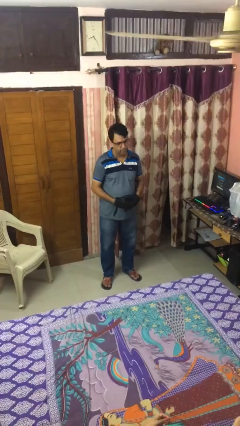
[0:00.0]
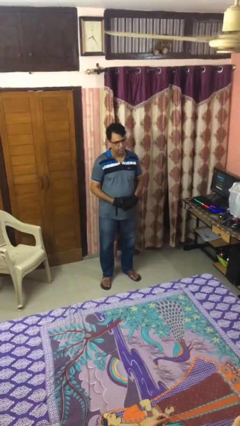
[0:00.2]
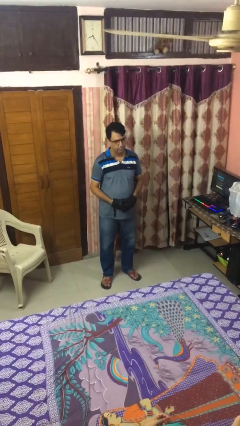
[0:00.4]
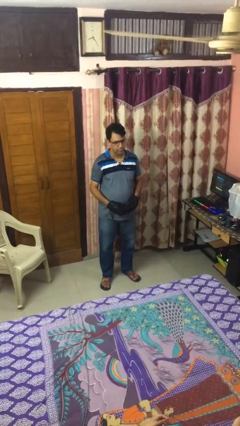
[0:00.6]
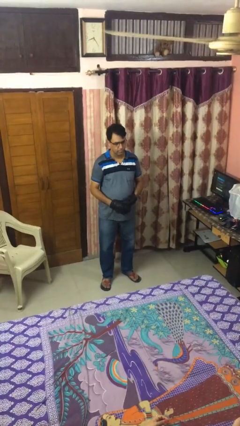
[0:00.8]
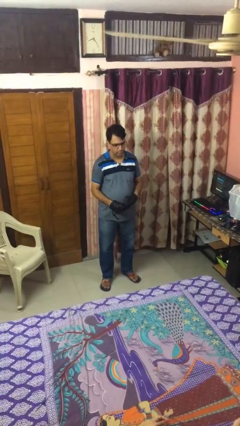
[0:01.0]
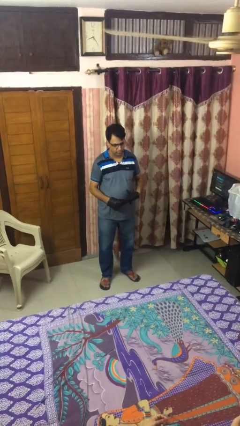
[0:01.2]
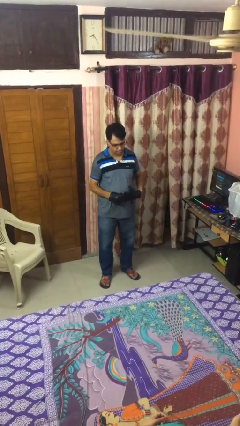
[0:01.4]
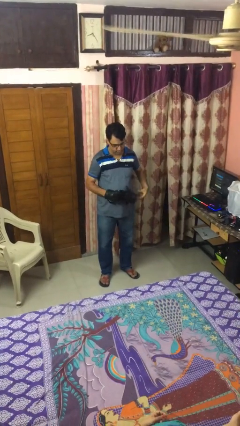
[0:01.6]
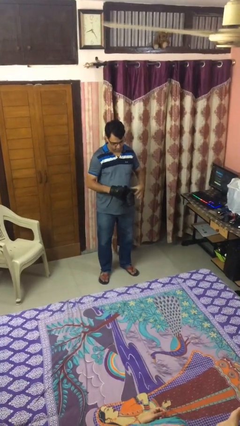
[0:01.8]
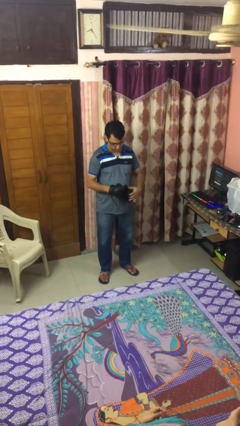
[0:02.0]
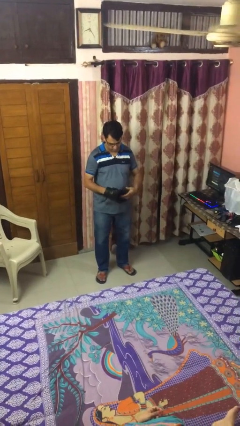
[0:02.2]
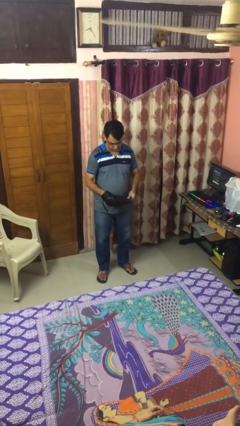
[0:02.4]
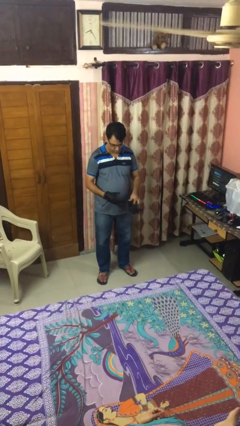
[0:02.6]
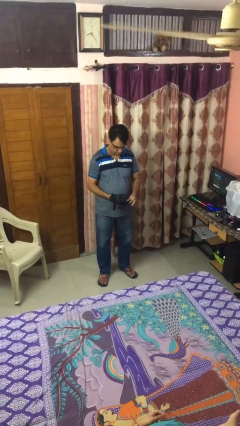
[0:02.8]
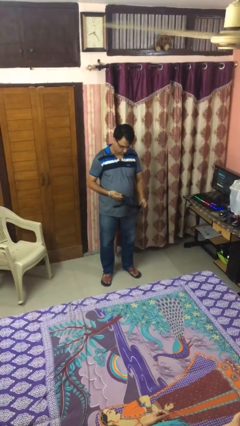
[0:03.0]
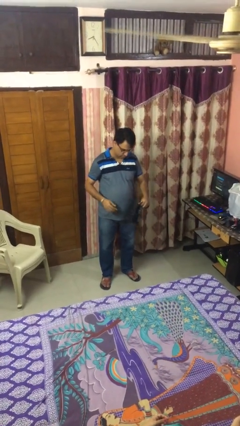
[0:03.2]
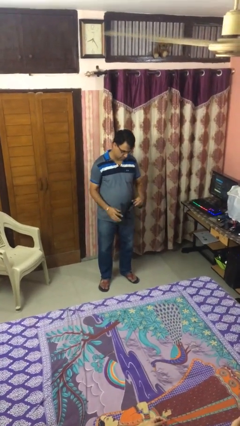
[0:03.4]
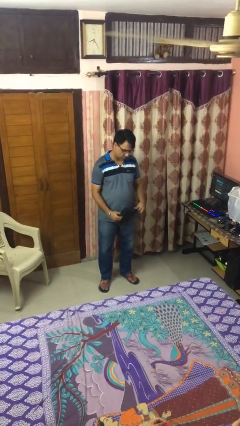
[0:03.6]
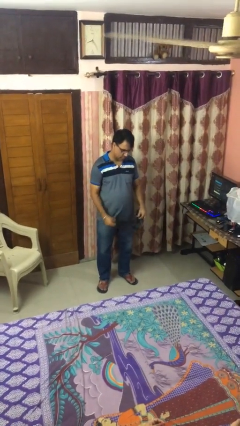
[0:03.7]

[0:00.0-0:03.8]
person takes off gloves

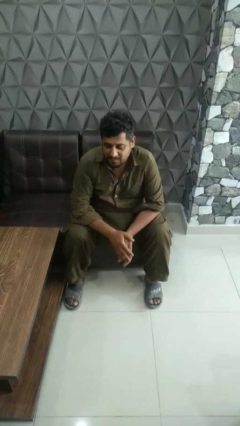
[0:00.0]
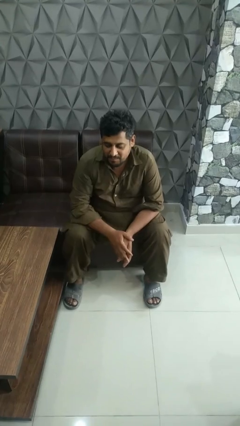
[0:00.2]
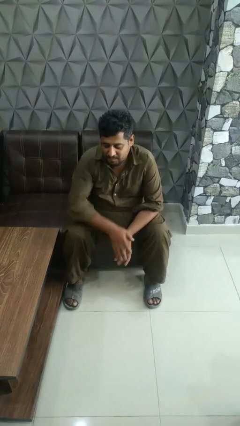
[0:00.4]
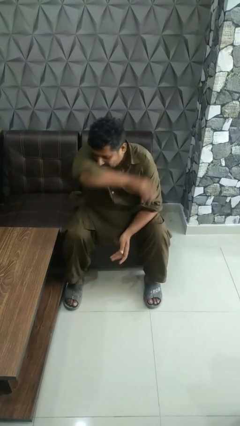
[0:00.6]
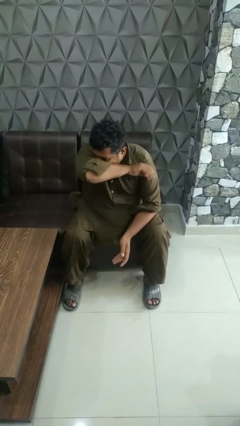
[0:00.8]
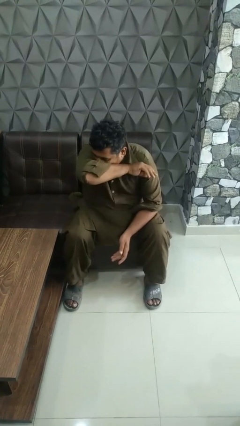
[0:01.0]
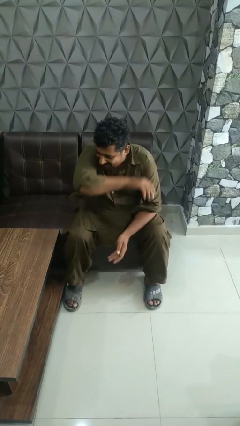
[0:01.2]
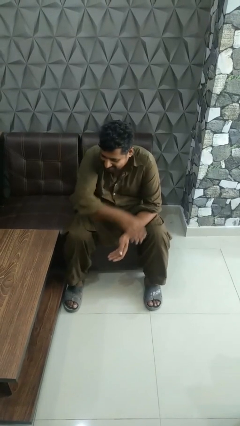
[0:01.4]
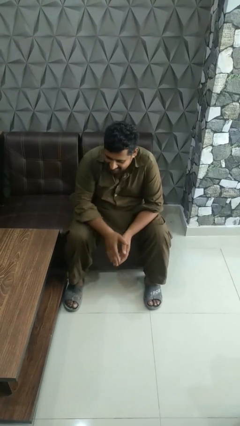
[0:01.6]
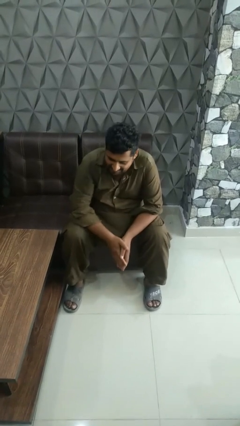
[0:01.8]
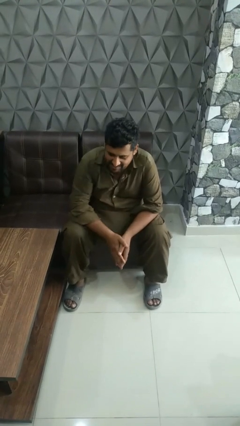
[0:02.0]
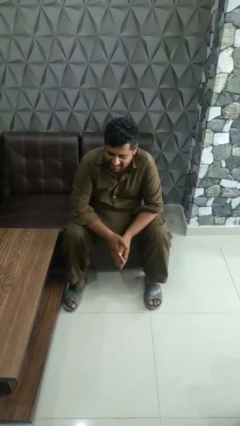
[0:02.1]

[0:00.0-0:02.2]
person sneezes into arm

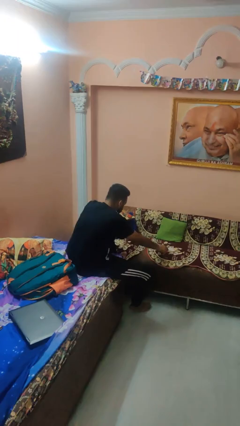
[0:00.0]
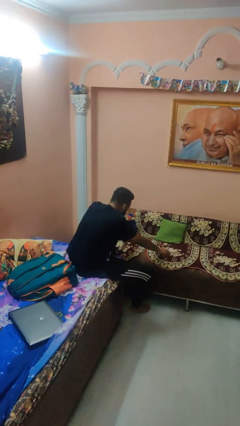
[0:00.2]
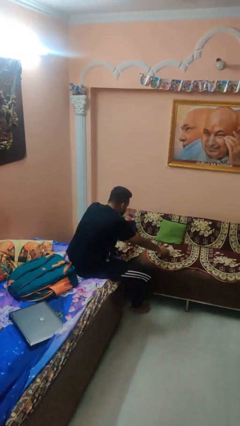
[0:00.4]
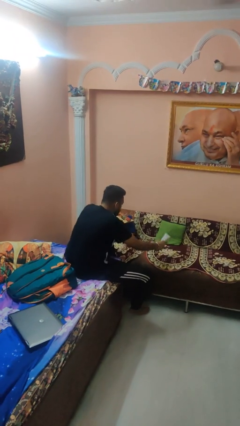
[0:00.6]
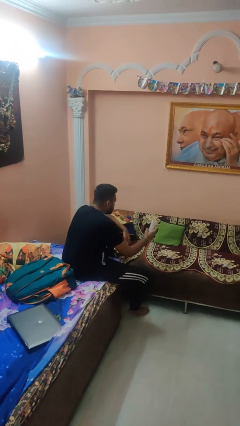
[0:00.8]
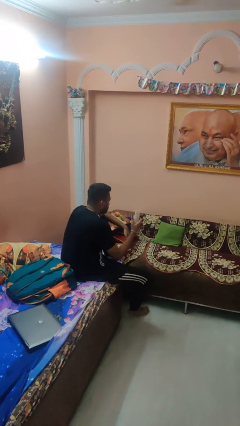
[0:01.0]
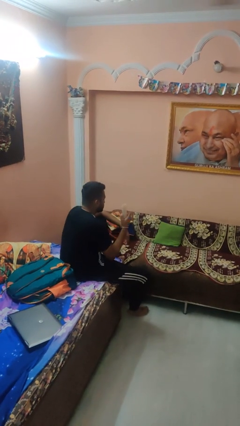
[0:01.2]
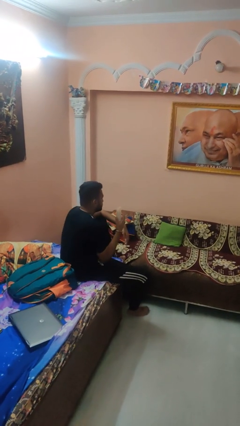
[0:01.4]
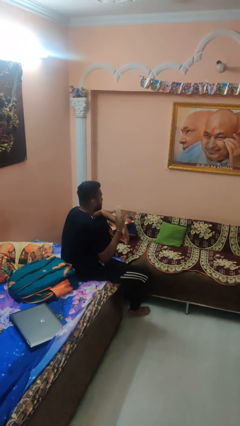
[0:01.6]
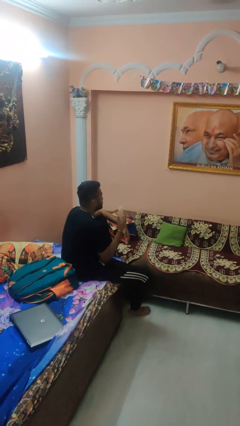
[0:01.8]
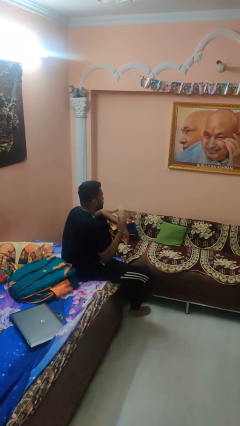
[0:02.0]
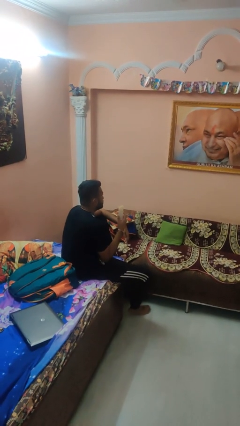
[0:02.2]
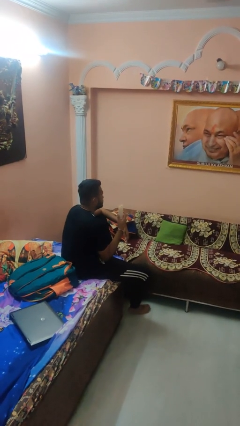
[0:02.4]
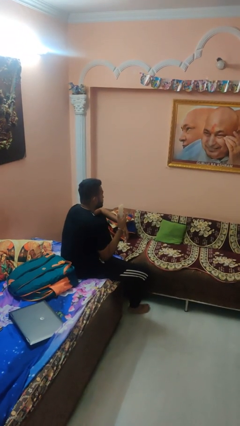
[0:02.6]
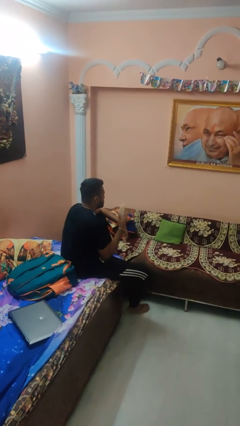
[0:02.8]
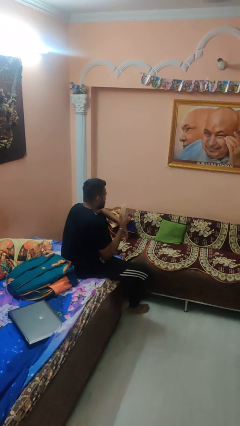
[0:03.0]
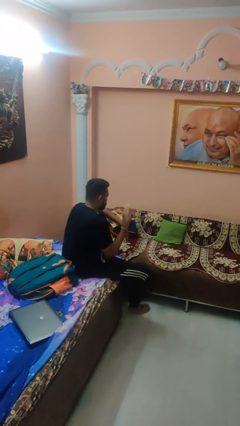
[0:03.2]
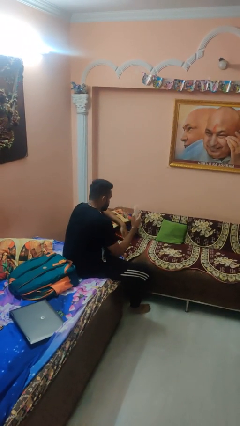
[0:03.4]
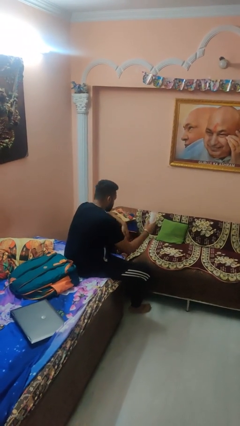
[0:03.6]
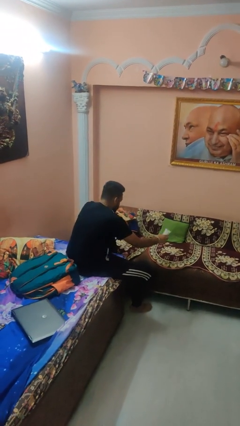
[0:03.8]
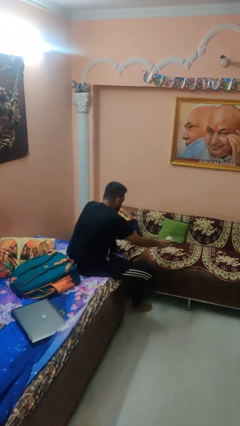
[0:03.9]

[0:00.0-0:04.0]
person picks up object from couch

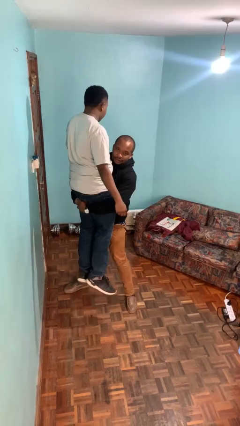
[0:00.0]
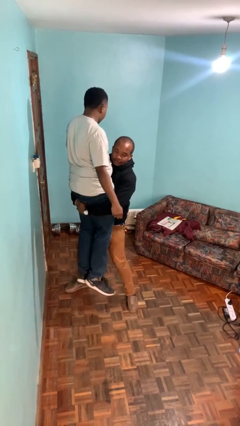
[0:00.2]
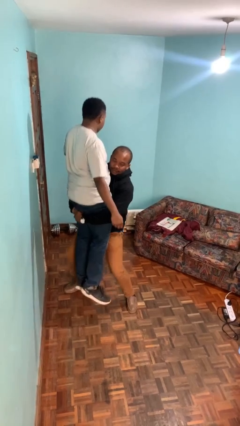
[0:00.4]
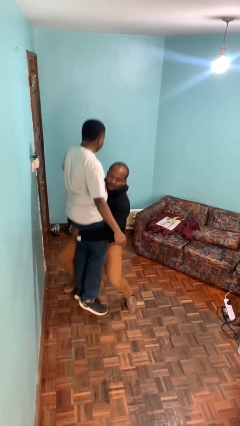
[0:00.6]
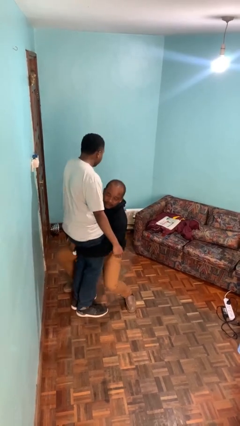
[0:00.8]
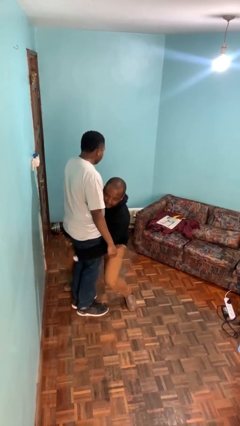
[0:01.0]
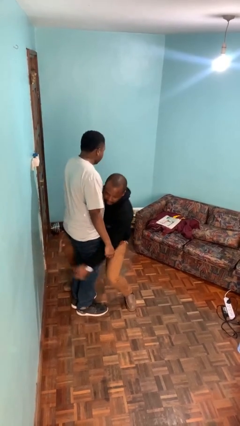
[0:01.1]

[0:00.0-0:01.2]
person puts down person

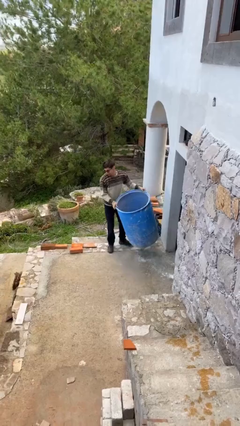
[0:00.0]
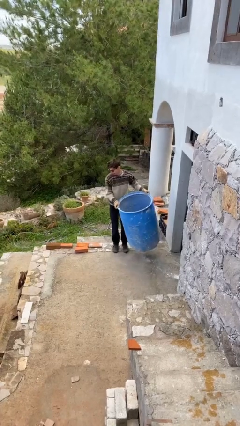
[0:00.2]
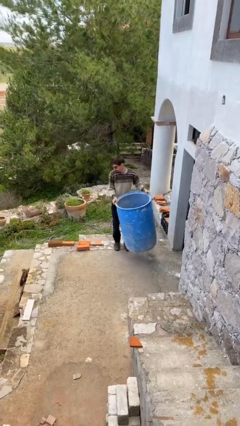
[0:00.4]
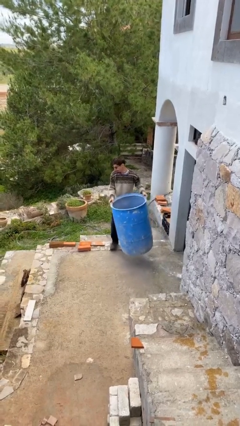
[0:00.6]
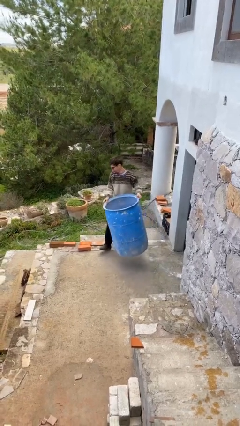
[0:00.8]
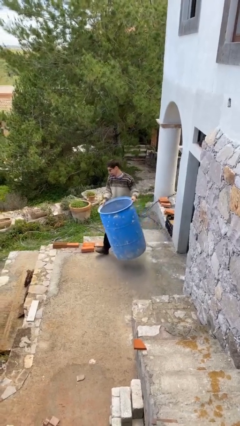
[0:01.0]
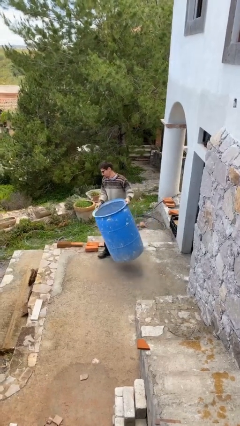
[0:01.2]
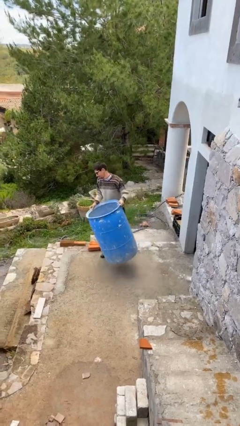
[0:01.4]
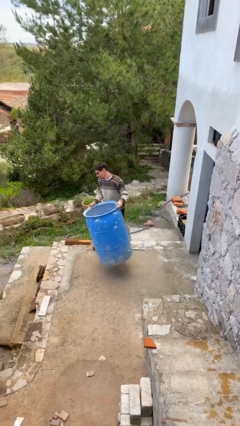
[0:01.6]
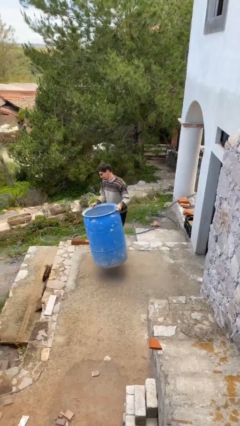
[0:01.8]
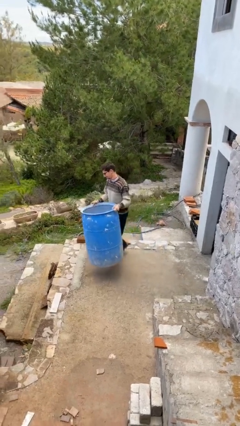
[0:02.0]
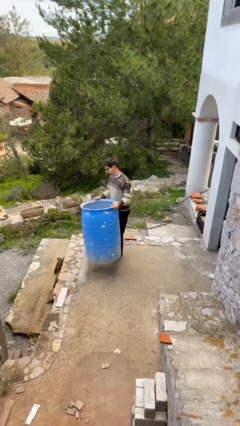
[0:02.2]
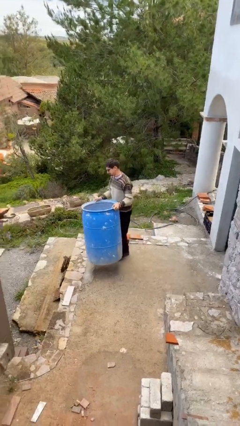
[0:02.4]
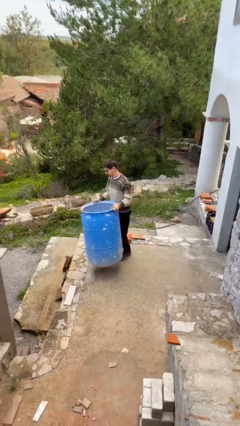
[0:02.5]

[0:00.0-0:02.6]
person carries heavy object

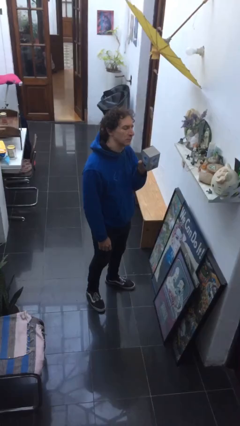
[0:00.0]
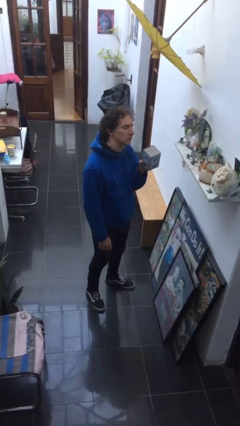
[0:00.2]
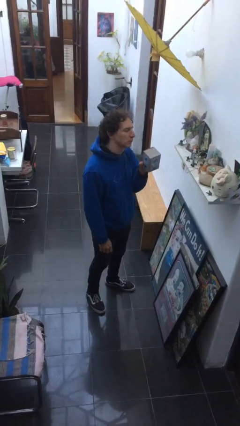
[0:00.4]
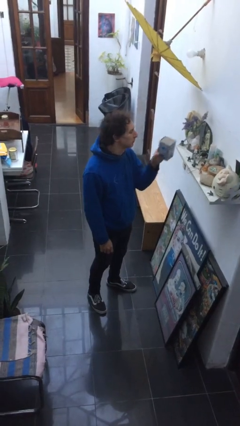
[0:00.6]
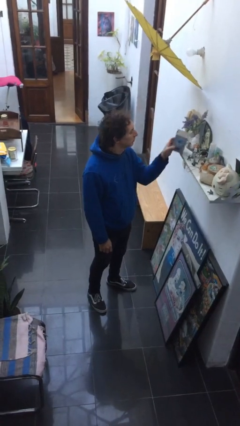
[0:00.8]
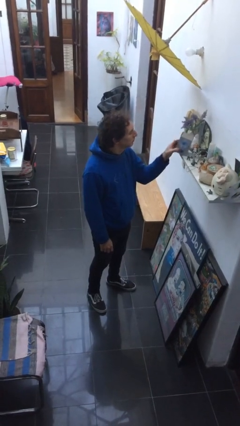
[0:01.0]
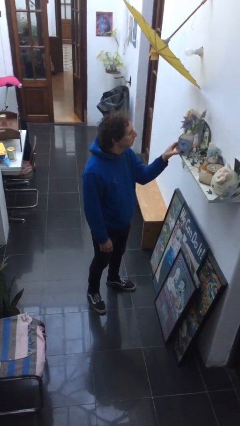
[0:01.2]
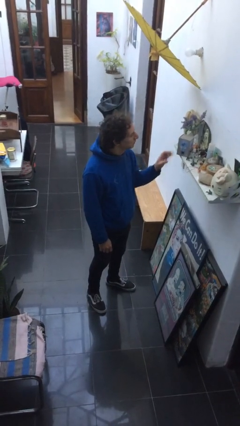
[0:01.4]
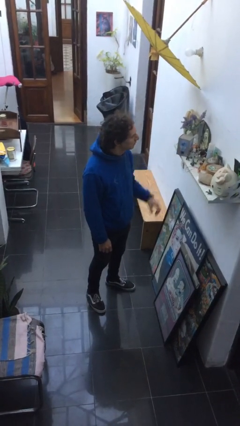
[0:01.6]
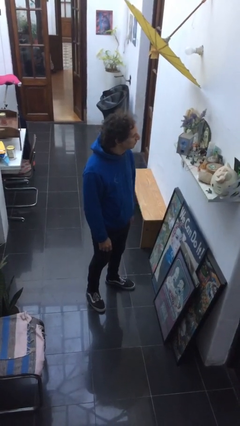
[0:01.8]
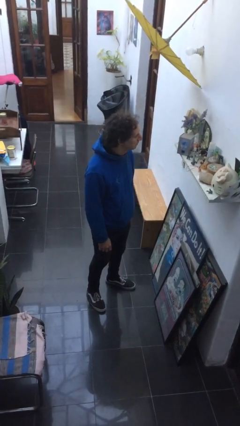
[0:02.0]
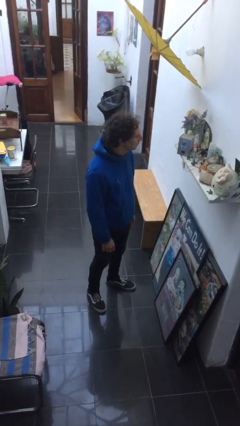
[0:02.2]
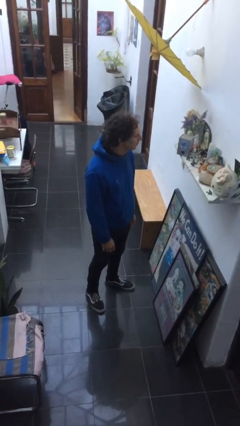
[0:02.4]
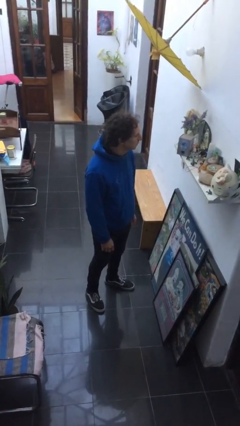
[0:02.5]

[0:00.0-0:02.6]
person puts down object on countertop

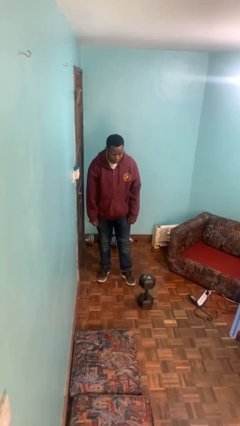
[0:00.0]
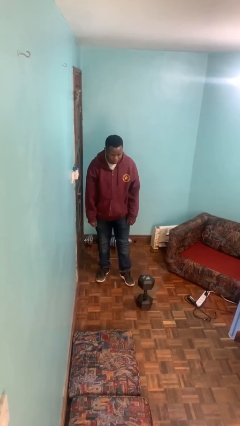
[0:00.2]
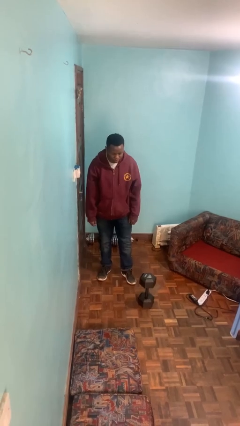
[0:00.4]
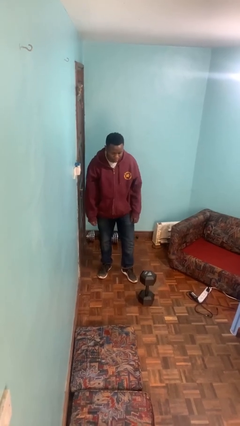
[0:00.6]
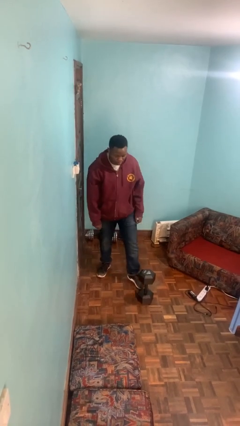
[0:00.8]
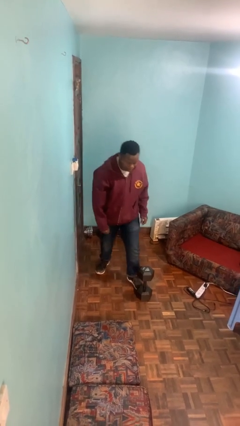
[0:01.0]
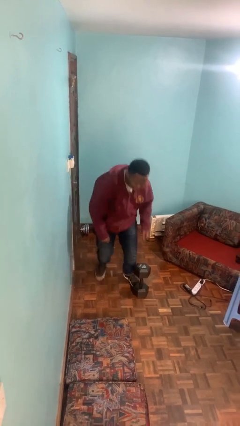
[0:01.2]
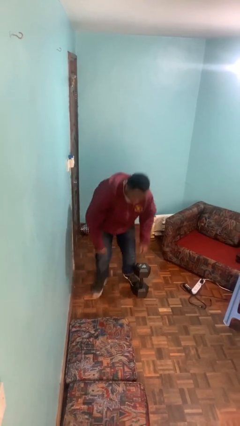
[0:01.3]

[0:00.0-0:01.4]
person trips on object on floor
